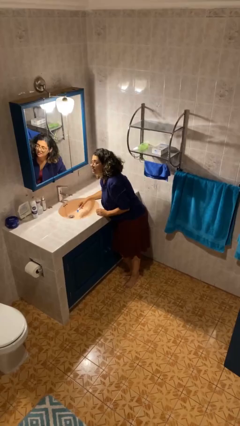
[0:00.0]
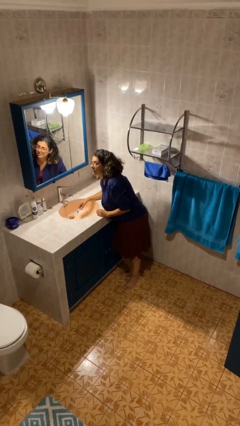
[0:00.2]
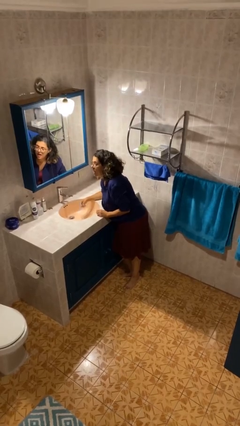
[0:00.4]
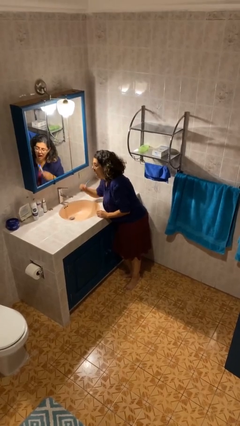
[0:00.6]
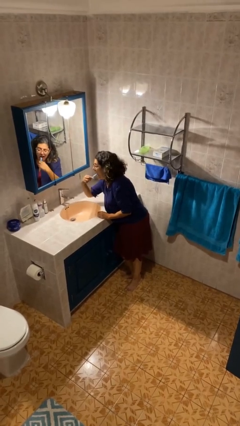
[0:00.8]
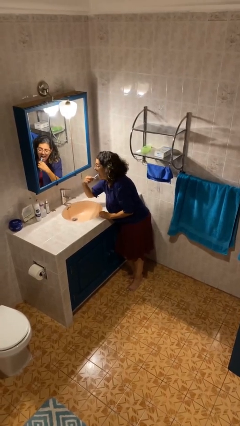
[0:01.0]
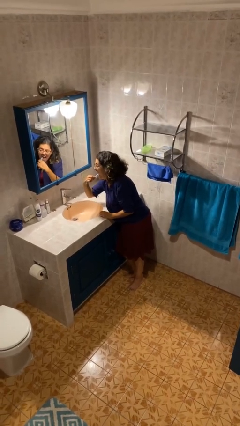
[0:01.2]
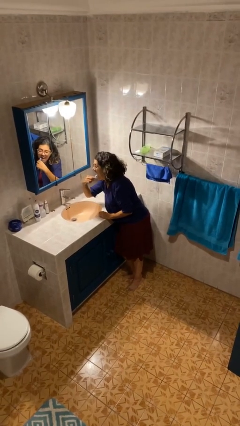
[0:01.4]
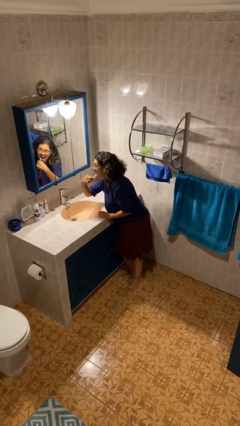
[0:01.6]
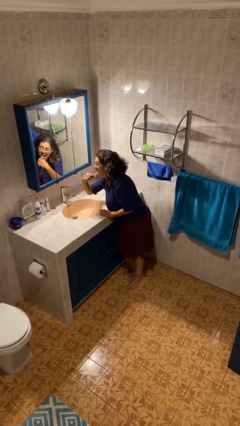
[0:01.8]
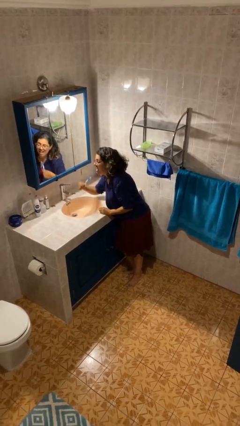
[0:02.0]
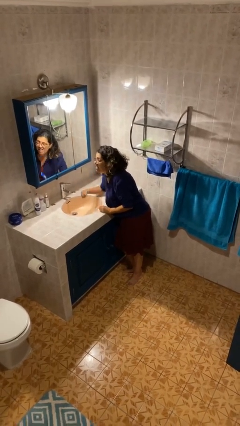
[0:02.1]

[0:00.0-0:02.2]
person brushes teeth

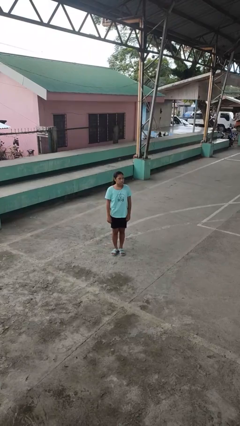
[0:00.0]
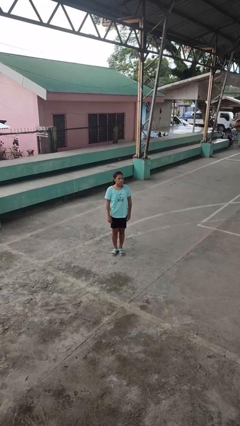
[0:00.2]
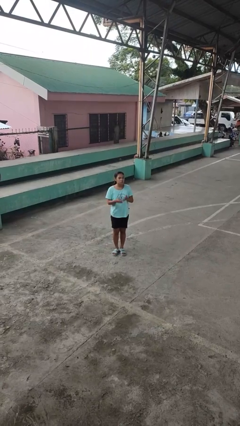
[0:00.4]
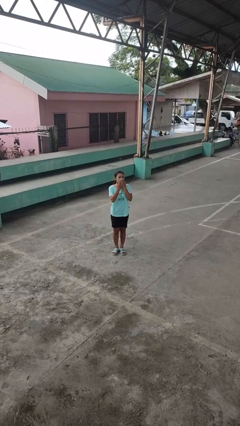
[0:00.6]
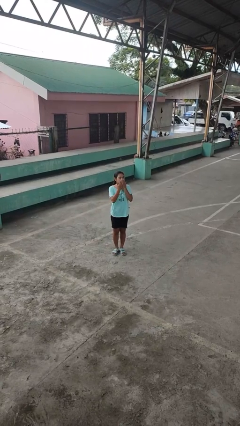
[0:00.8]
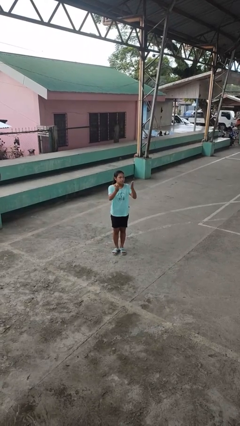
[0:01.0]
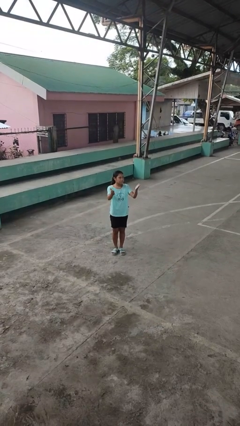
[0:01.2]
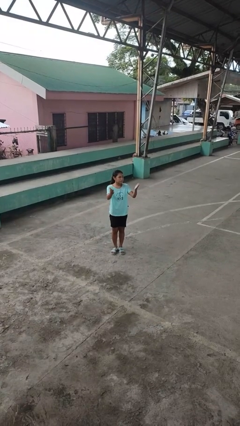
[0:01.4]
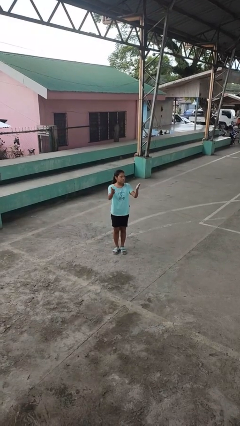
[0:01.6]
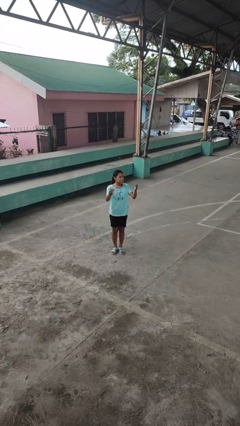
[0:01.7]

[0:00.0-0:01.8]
person gestures blow kiss

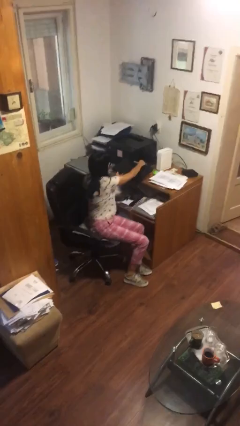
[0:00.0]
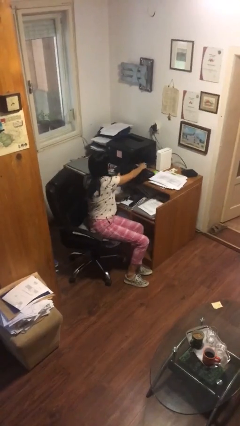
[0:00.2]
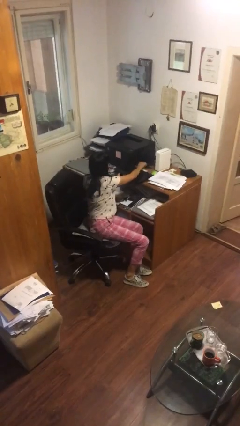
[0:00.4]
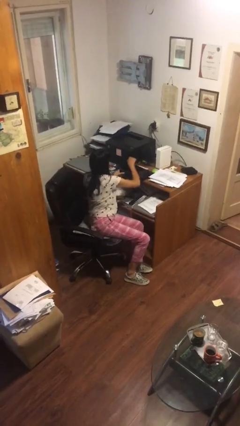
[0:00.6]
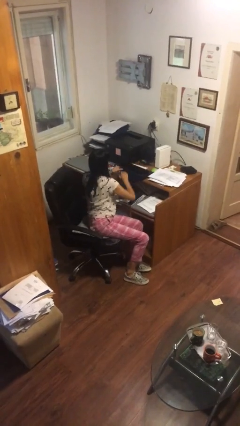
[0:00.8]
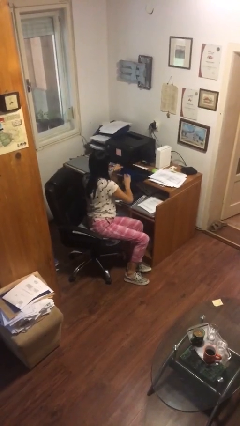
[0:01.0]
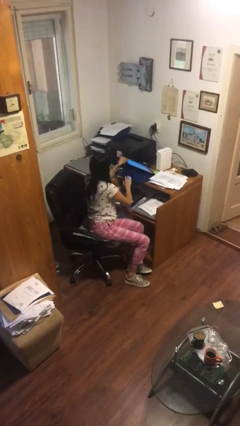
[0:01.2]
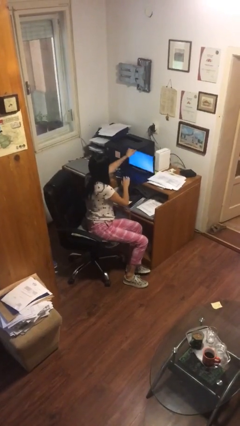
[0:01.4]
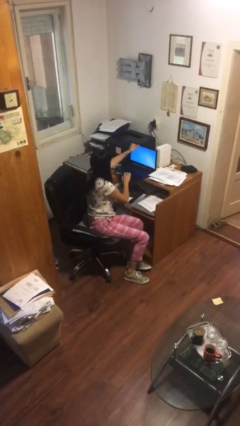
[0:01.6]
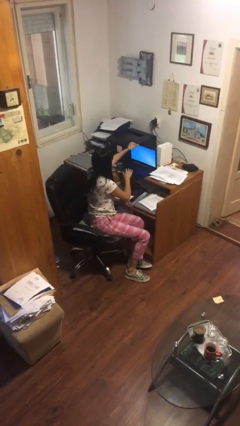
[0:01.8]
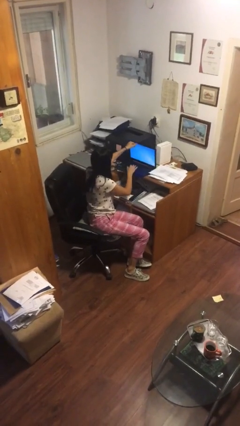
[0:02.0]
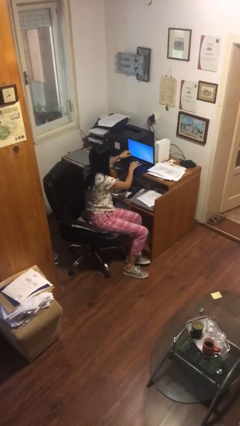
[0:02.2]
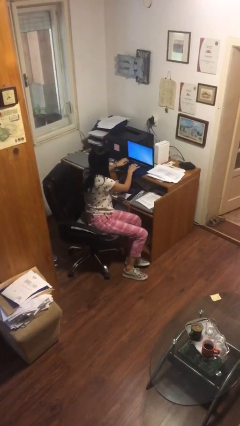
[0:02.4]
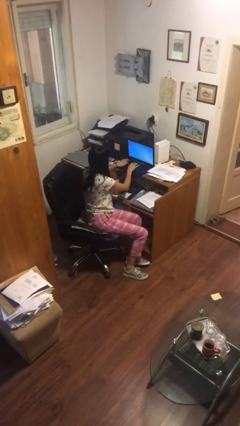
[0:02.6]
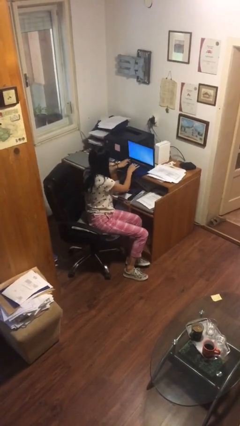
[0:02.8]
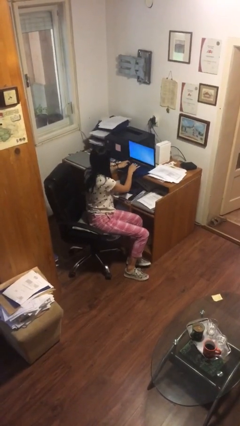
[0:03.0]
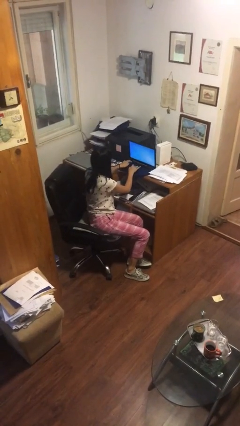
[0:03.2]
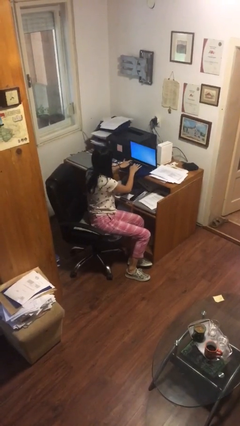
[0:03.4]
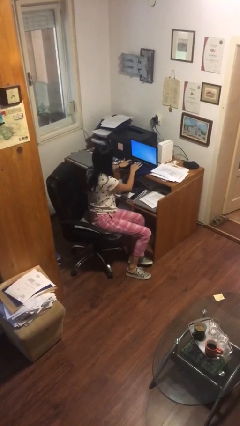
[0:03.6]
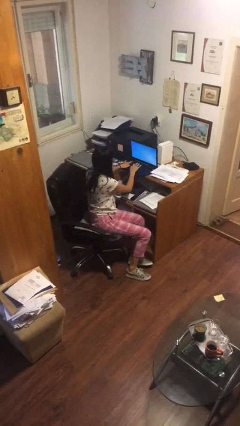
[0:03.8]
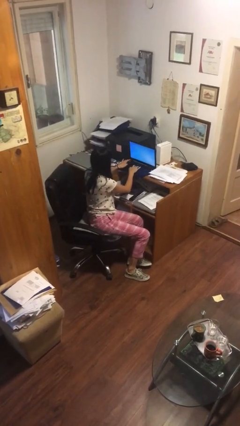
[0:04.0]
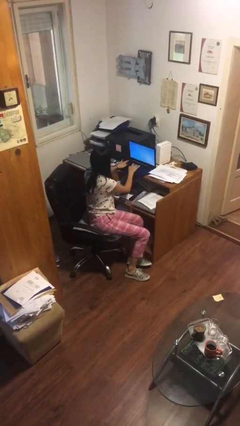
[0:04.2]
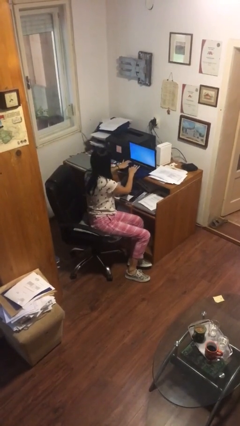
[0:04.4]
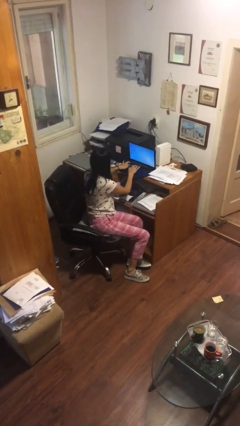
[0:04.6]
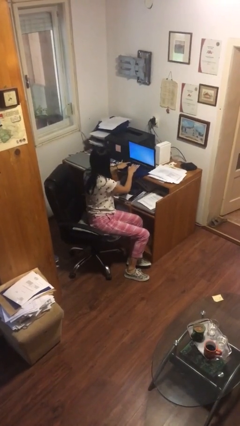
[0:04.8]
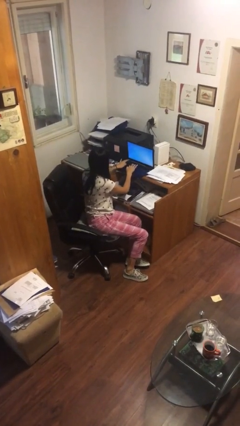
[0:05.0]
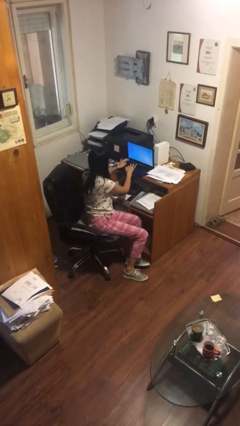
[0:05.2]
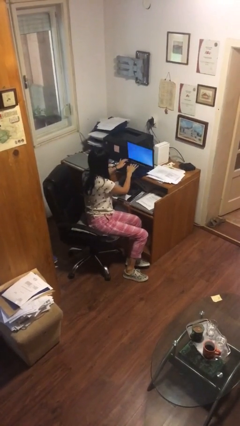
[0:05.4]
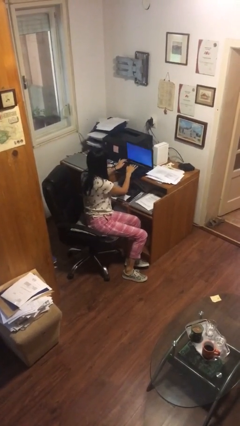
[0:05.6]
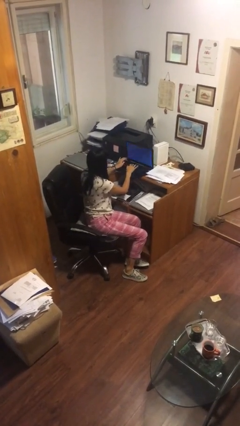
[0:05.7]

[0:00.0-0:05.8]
person interacts with laptop

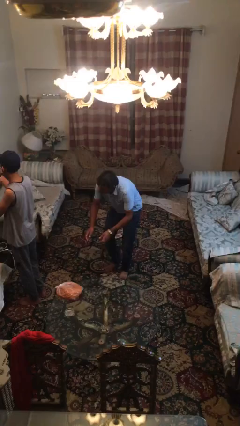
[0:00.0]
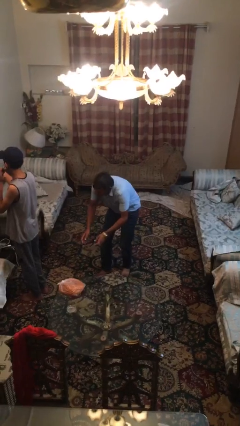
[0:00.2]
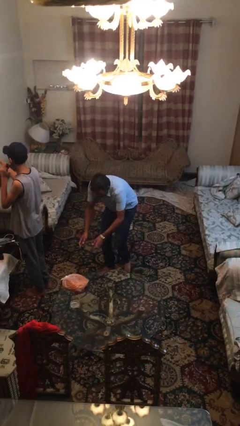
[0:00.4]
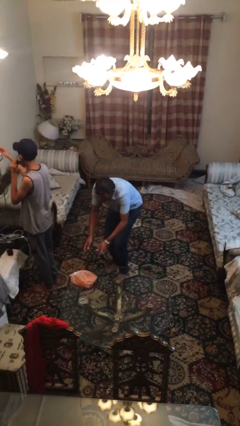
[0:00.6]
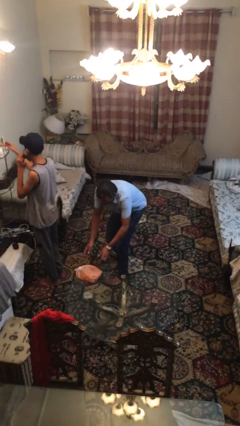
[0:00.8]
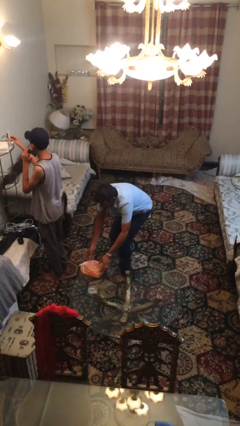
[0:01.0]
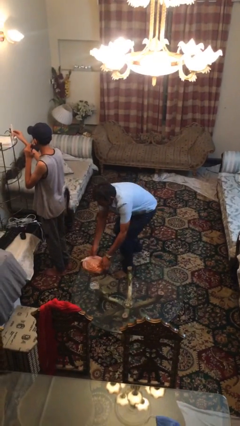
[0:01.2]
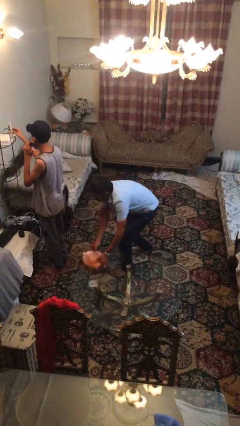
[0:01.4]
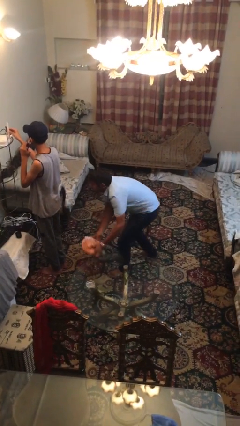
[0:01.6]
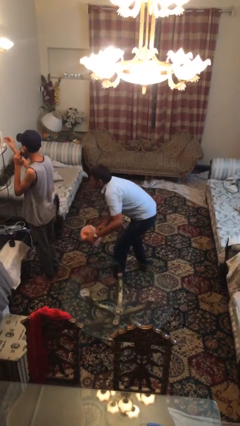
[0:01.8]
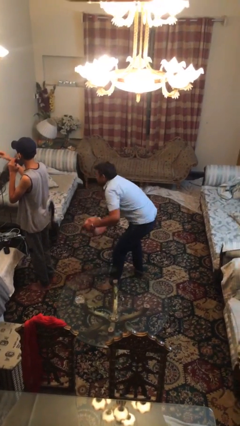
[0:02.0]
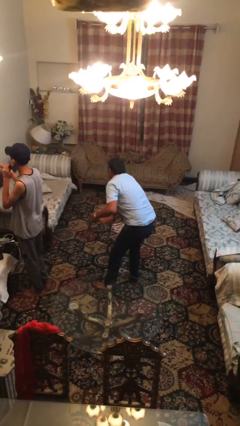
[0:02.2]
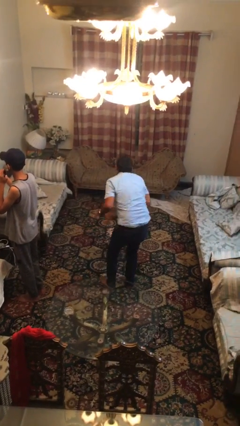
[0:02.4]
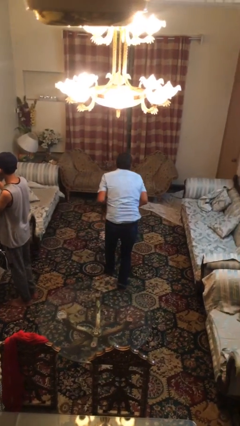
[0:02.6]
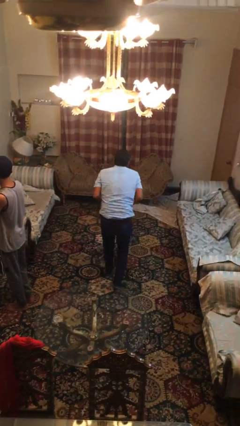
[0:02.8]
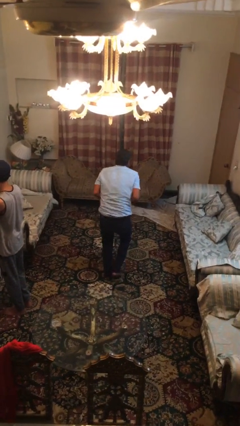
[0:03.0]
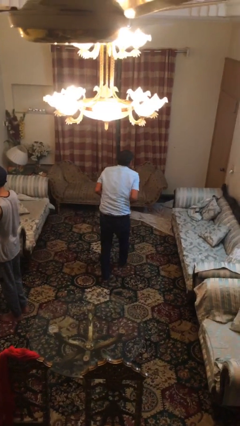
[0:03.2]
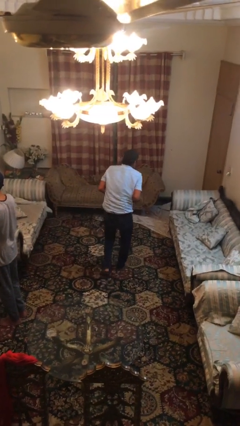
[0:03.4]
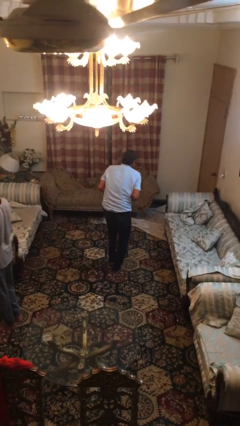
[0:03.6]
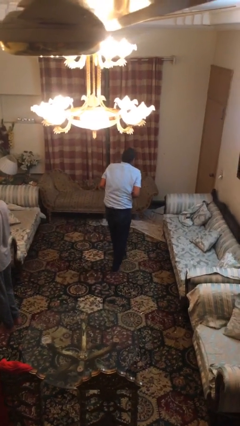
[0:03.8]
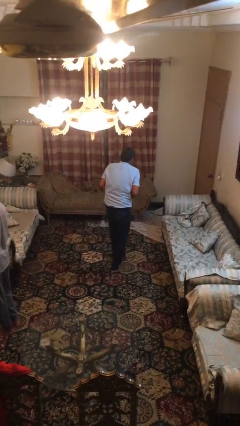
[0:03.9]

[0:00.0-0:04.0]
person steals object from person

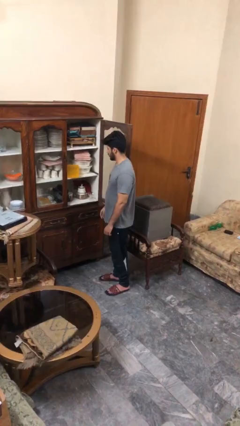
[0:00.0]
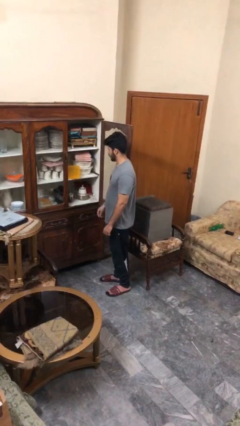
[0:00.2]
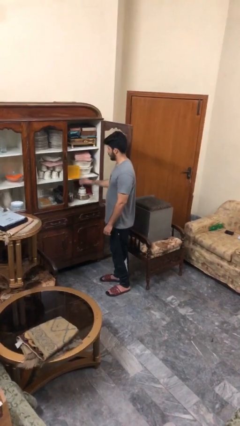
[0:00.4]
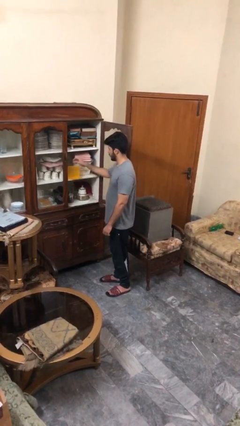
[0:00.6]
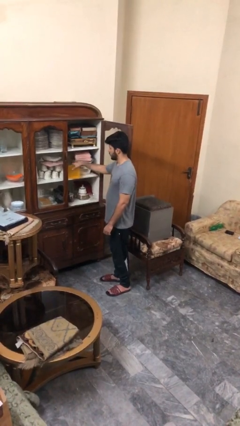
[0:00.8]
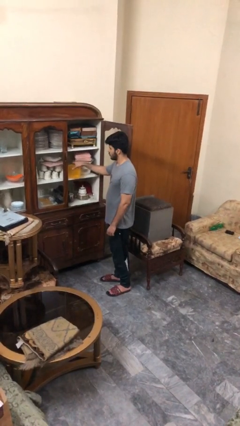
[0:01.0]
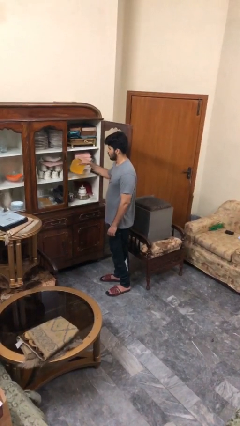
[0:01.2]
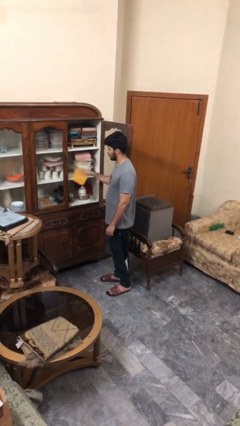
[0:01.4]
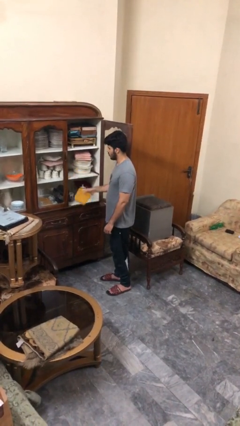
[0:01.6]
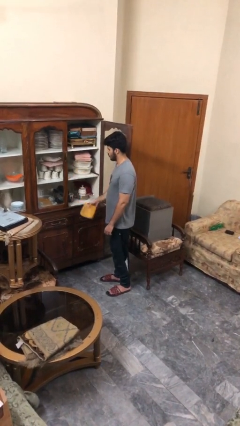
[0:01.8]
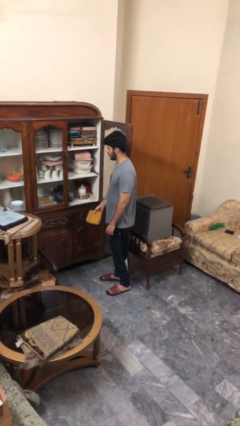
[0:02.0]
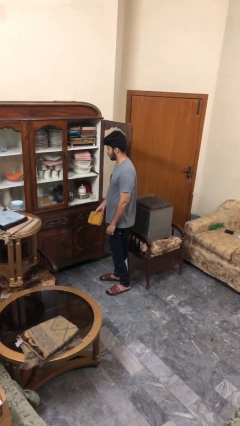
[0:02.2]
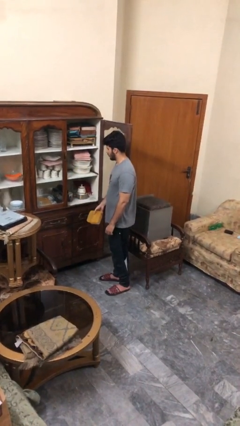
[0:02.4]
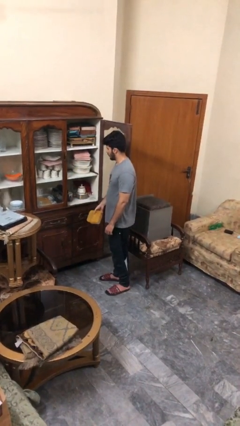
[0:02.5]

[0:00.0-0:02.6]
person picks up object from cabinet

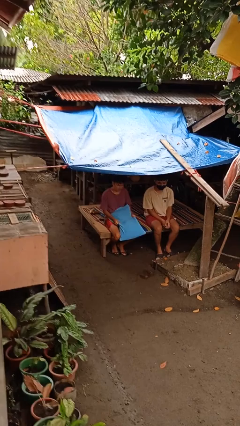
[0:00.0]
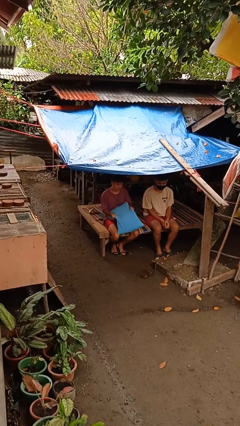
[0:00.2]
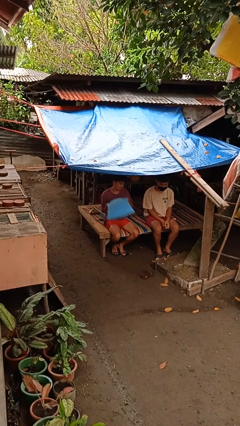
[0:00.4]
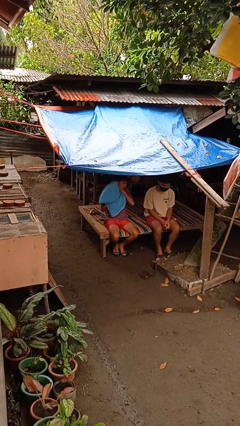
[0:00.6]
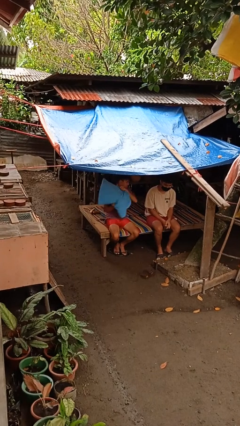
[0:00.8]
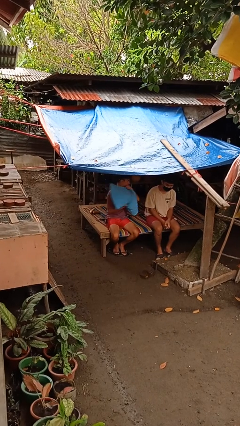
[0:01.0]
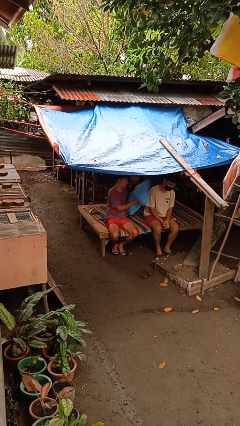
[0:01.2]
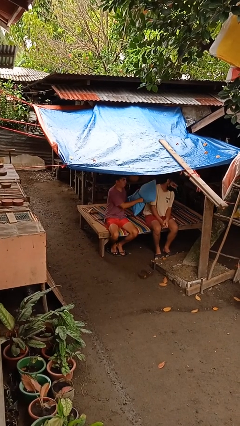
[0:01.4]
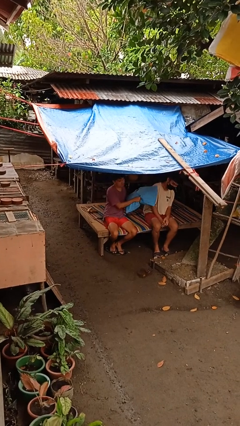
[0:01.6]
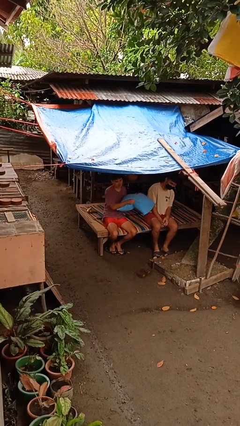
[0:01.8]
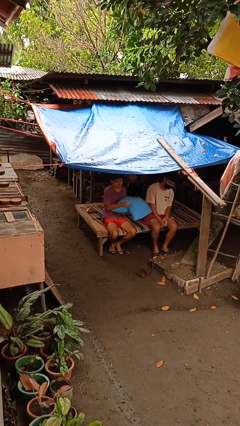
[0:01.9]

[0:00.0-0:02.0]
person hits person with pillow
